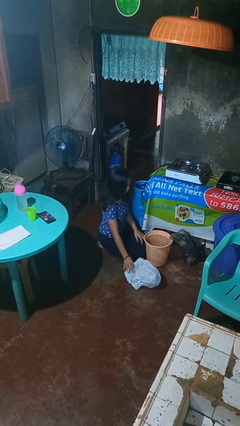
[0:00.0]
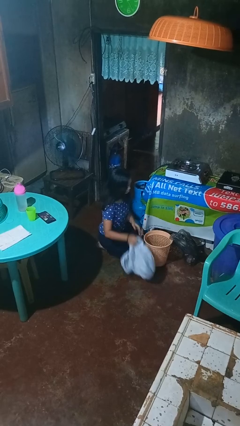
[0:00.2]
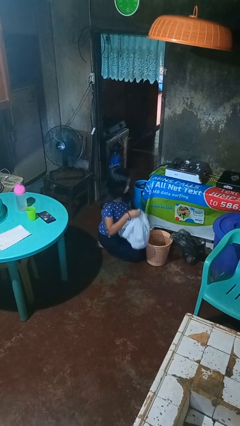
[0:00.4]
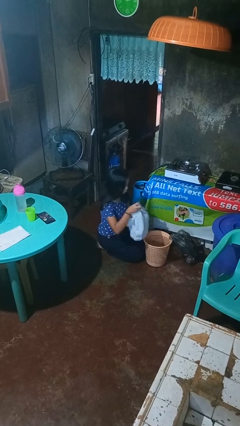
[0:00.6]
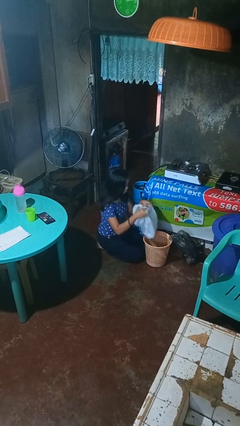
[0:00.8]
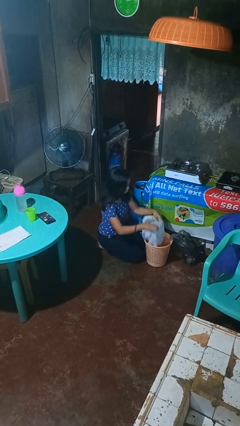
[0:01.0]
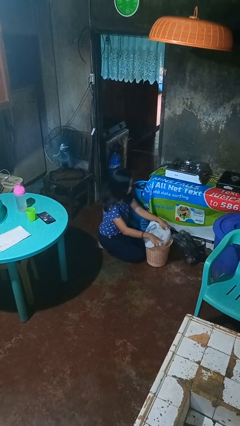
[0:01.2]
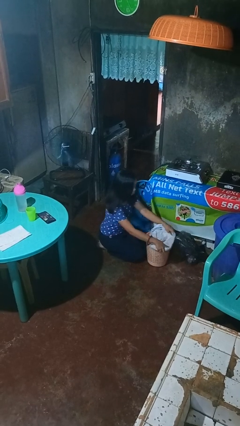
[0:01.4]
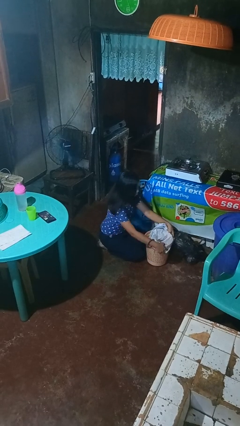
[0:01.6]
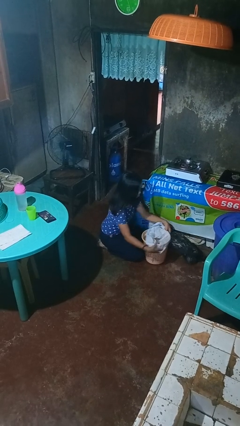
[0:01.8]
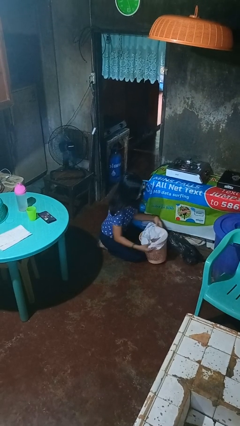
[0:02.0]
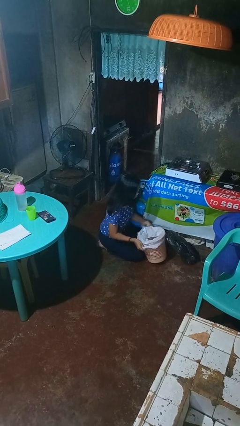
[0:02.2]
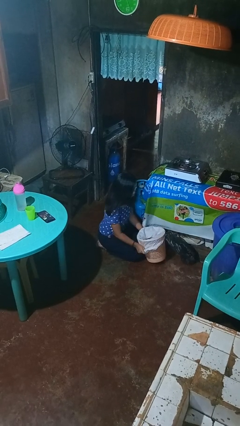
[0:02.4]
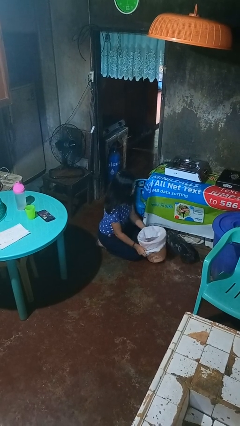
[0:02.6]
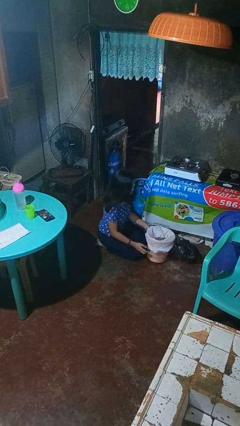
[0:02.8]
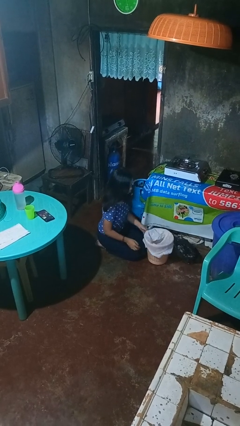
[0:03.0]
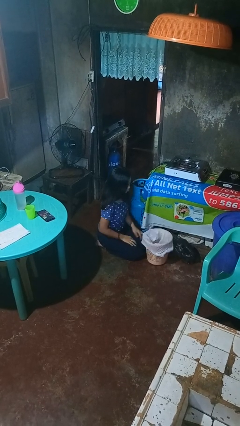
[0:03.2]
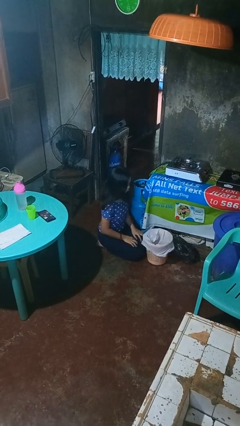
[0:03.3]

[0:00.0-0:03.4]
person inserts trashbag into trashcan

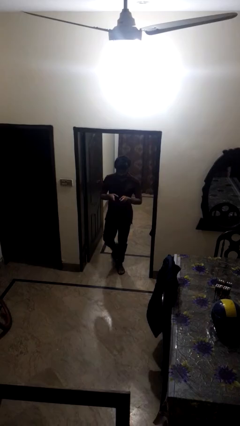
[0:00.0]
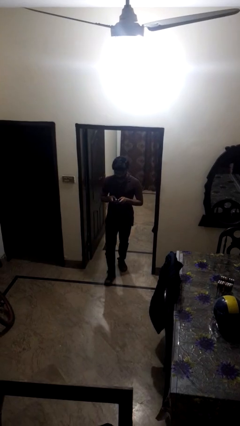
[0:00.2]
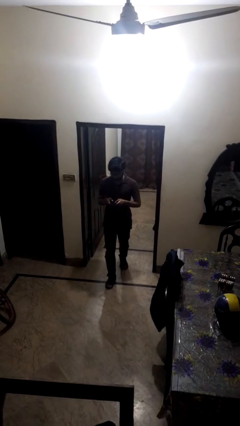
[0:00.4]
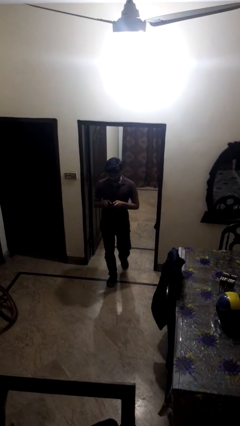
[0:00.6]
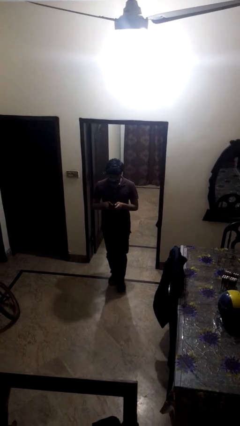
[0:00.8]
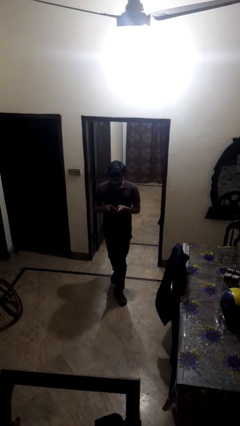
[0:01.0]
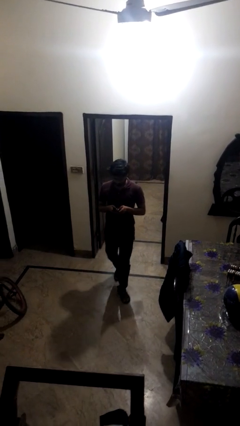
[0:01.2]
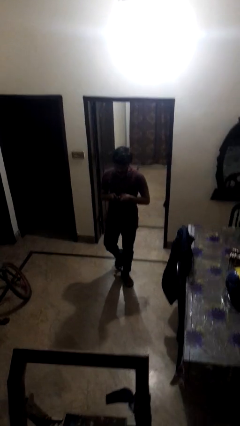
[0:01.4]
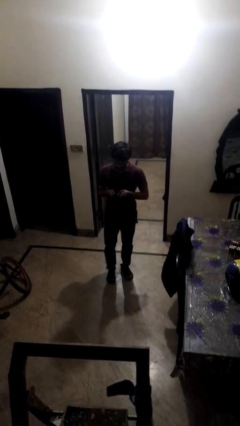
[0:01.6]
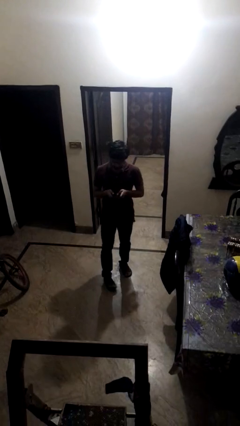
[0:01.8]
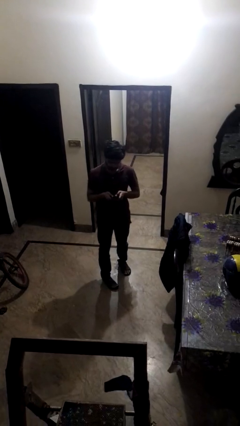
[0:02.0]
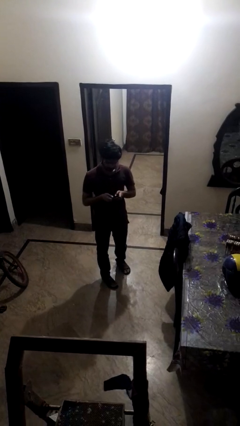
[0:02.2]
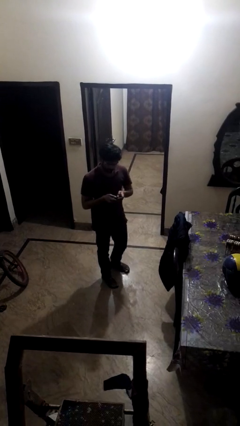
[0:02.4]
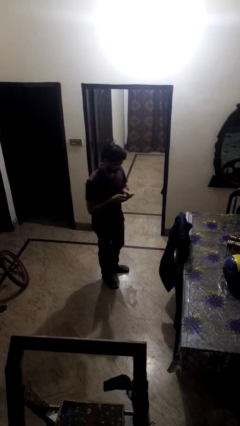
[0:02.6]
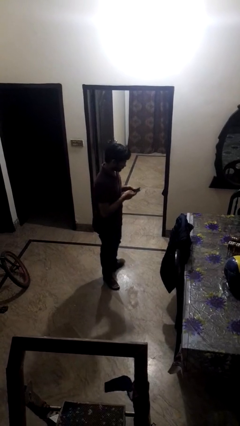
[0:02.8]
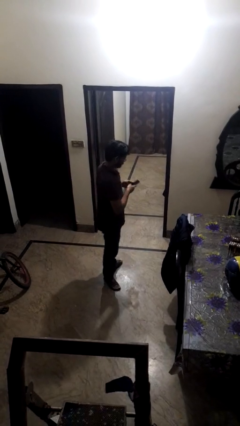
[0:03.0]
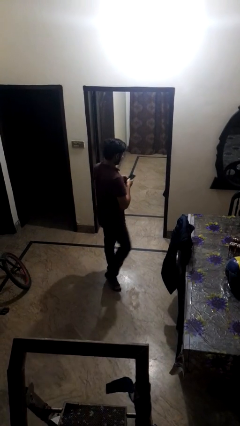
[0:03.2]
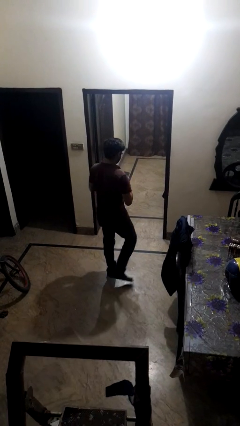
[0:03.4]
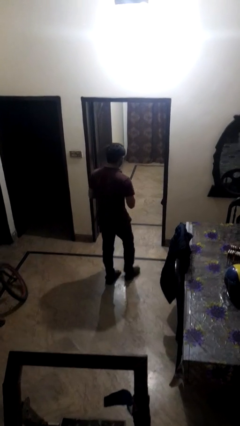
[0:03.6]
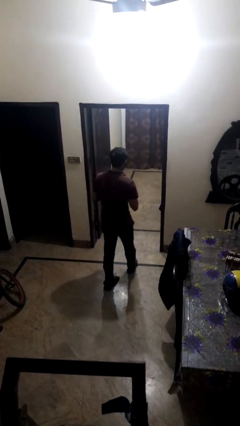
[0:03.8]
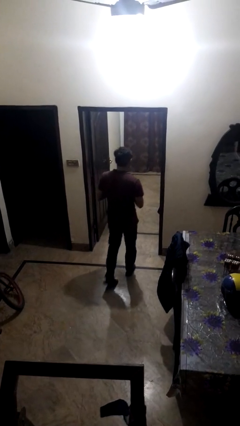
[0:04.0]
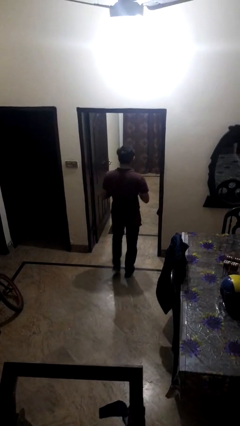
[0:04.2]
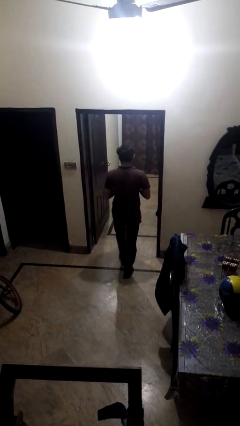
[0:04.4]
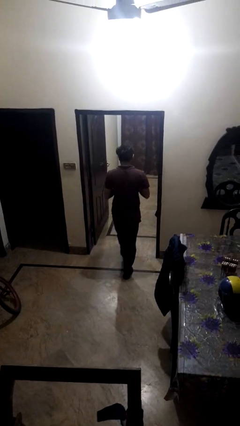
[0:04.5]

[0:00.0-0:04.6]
person enters scene through structure

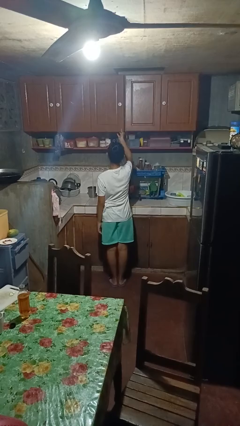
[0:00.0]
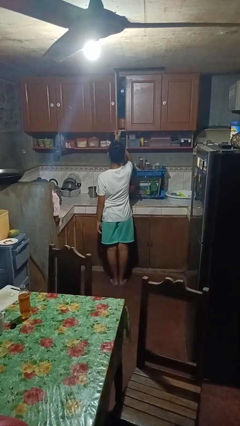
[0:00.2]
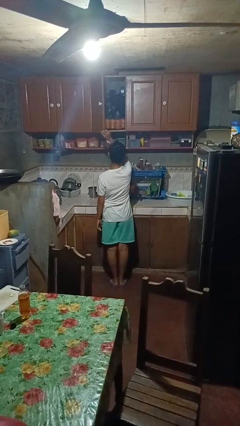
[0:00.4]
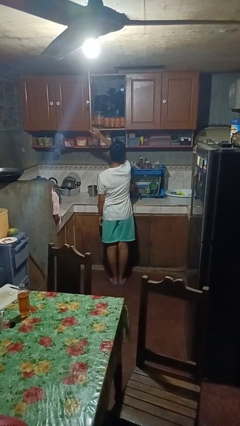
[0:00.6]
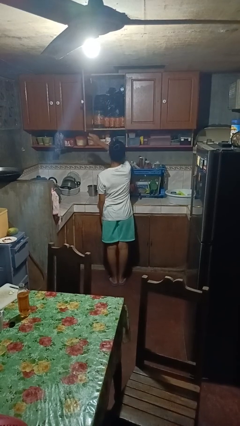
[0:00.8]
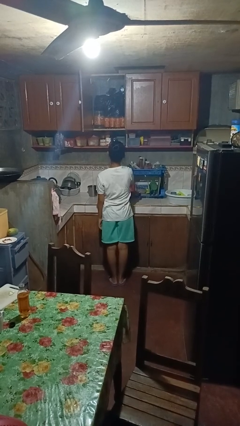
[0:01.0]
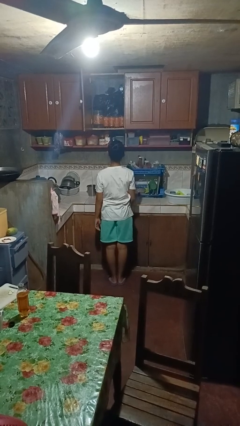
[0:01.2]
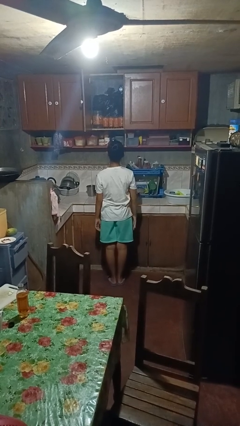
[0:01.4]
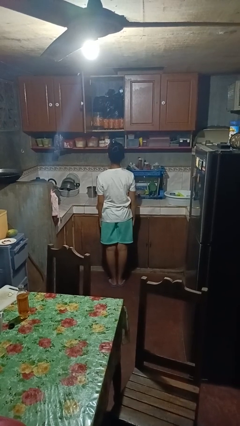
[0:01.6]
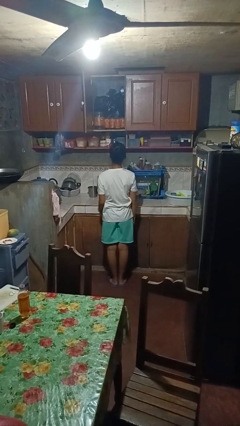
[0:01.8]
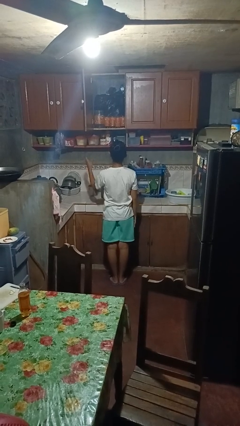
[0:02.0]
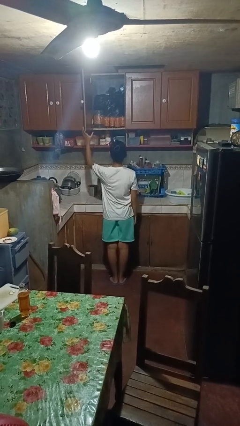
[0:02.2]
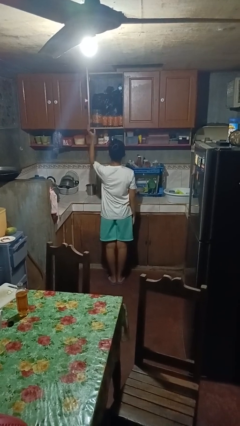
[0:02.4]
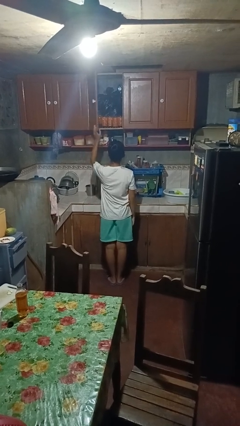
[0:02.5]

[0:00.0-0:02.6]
person opens cabinet

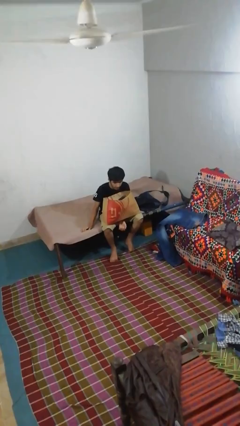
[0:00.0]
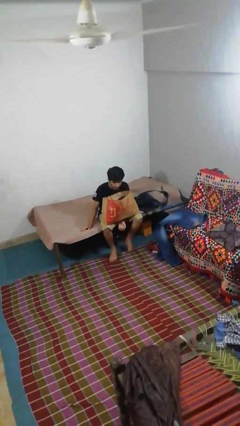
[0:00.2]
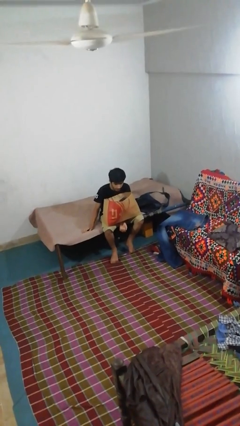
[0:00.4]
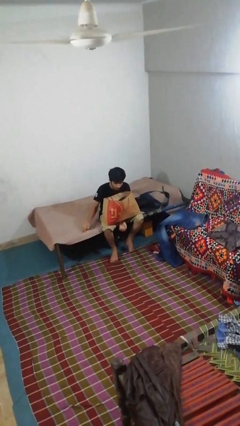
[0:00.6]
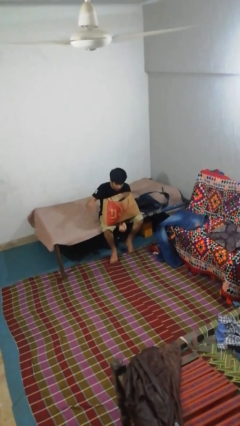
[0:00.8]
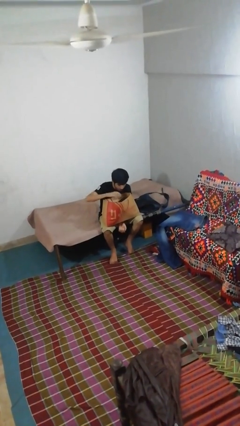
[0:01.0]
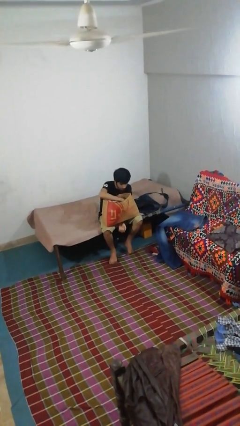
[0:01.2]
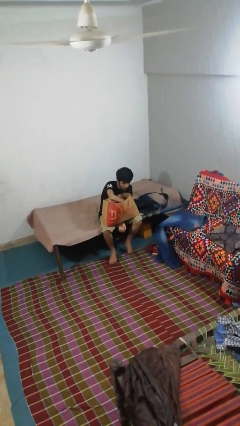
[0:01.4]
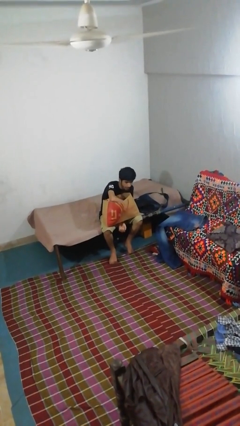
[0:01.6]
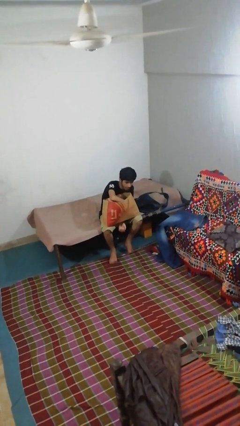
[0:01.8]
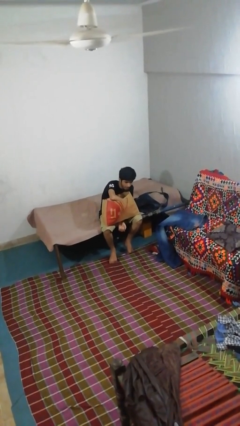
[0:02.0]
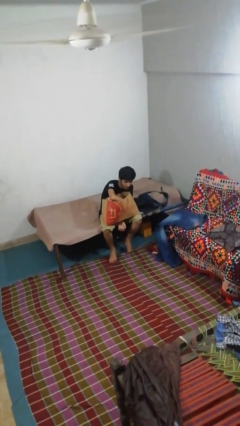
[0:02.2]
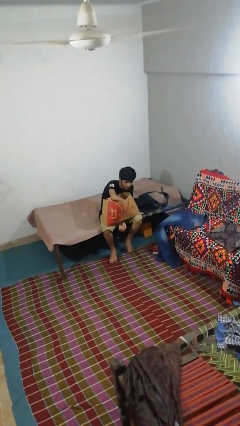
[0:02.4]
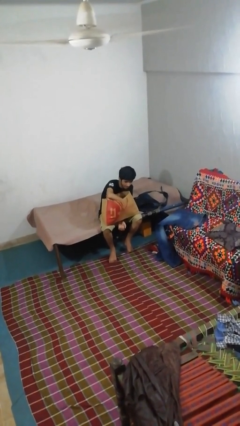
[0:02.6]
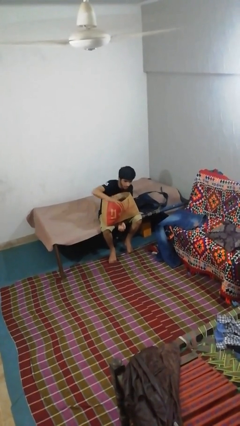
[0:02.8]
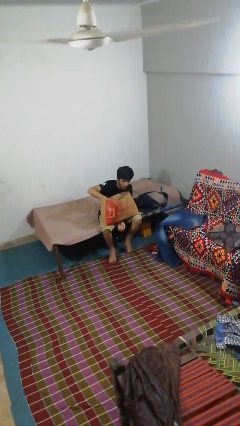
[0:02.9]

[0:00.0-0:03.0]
person searches in bag

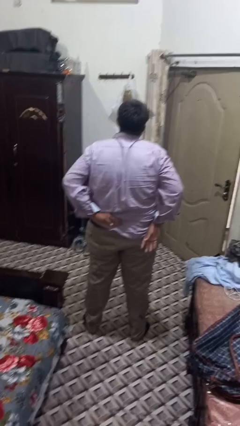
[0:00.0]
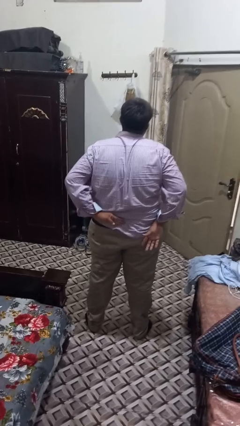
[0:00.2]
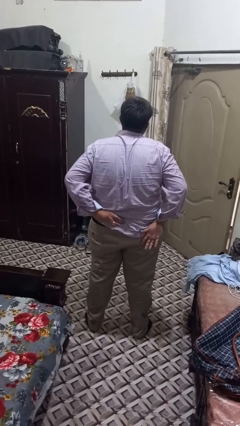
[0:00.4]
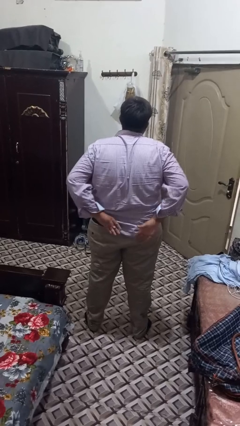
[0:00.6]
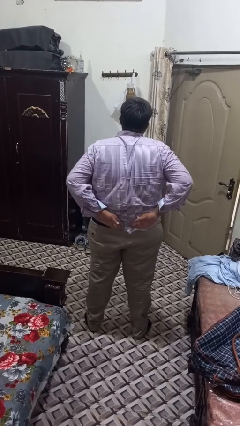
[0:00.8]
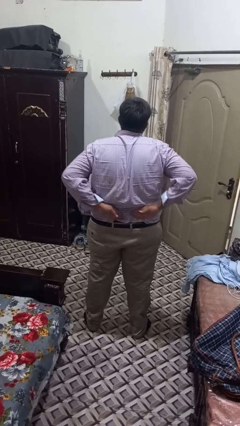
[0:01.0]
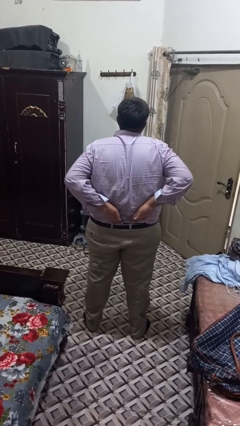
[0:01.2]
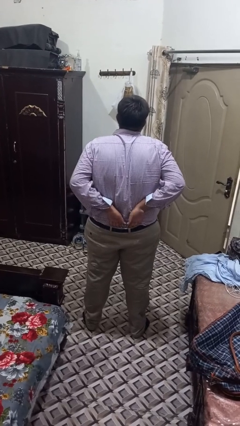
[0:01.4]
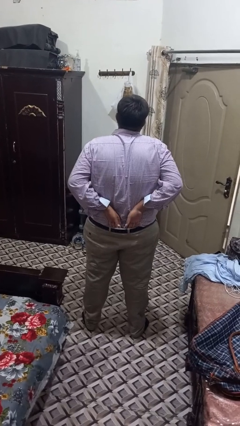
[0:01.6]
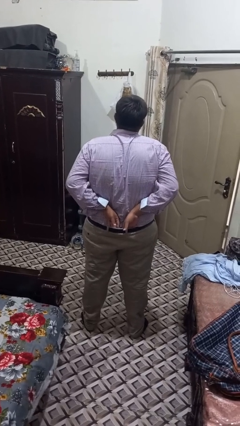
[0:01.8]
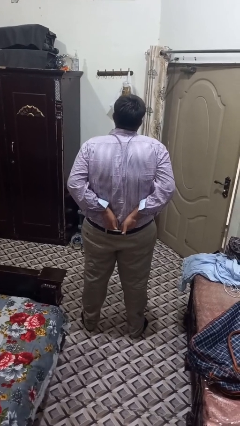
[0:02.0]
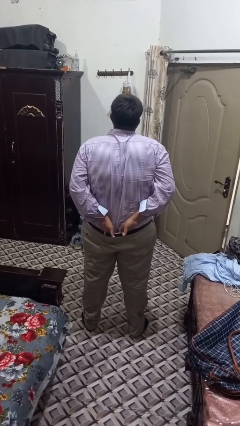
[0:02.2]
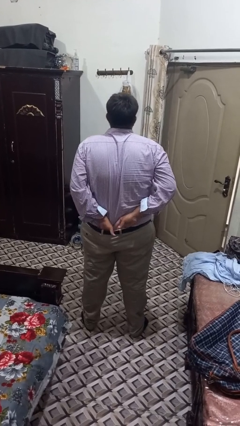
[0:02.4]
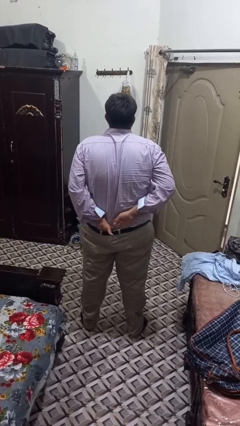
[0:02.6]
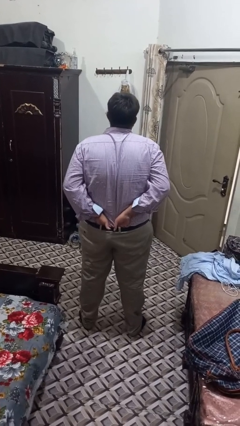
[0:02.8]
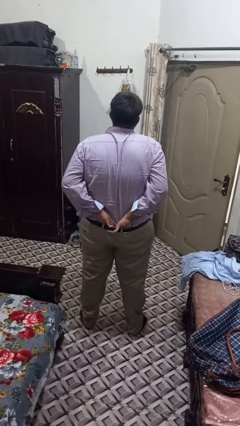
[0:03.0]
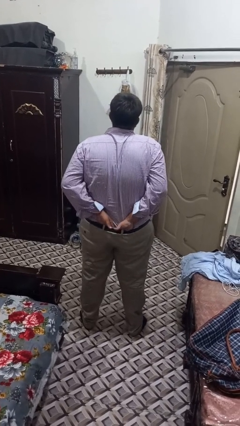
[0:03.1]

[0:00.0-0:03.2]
person tucks in shirt

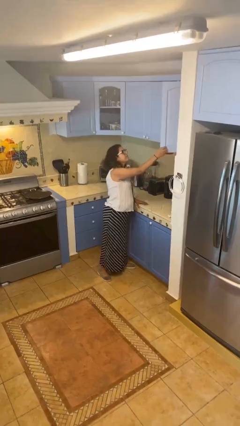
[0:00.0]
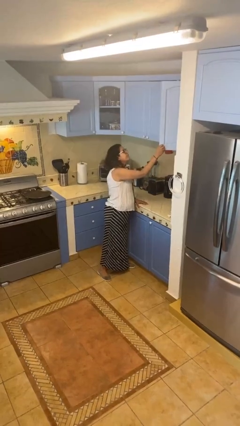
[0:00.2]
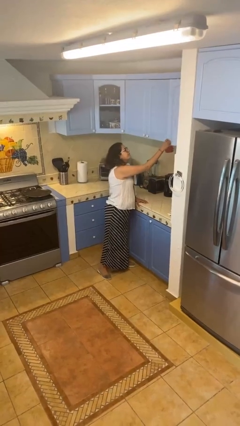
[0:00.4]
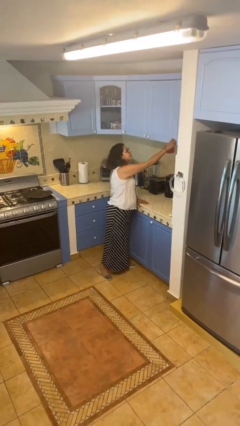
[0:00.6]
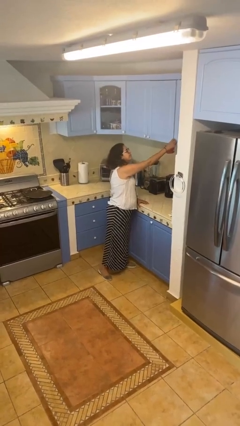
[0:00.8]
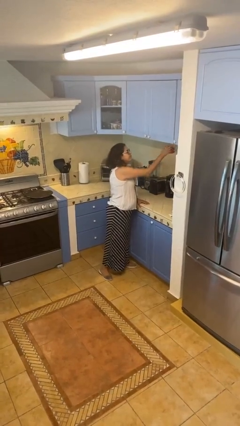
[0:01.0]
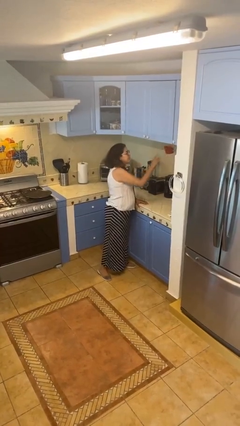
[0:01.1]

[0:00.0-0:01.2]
person closes cabinet
